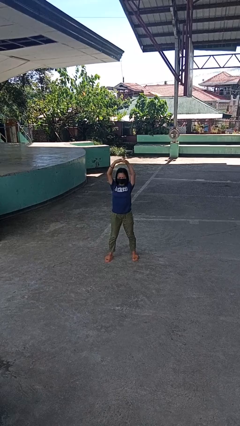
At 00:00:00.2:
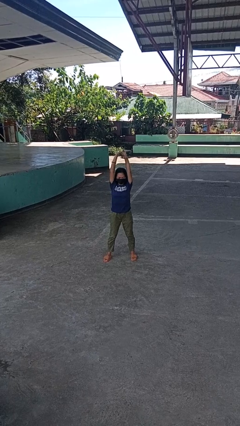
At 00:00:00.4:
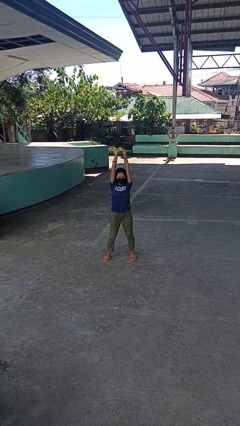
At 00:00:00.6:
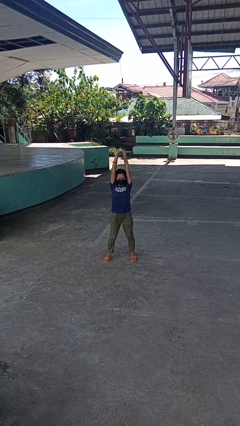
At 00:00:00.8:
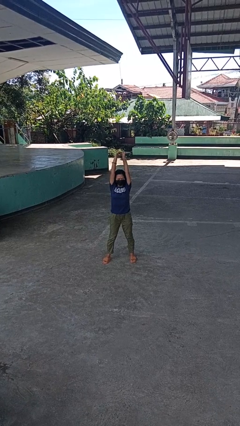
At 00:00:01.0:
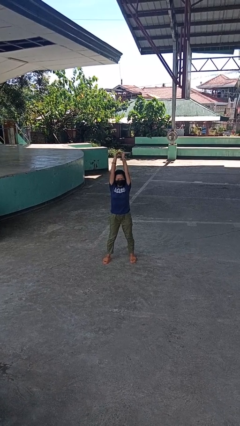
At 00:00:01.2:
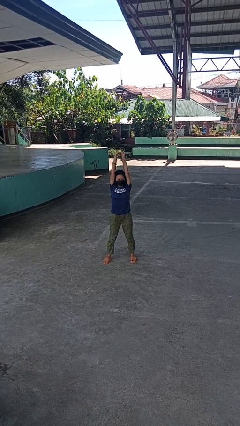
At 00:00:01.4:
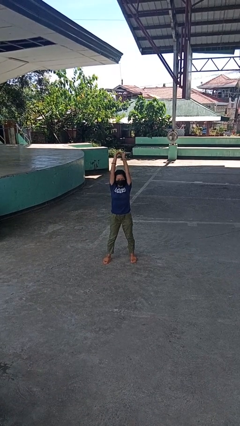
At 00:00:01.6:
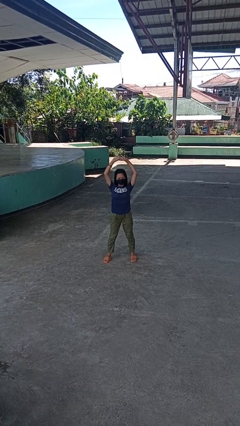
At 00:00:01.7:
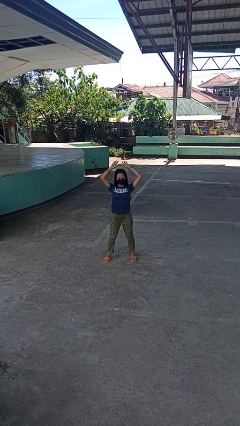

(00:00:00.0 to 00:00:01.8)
person stretches arms over head

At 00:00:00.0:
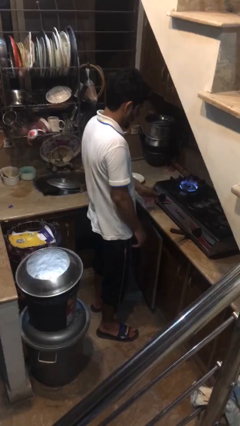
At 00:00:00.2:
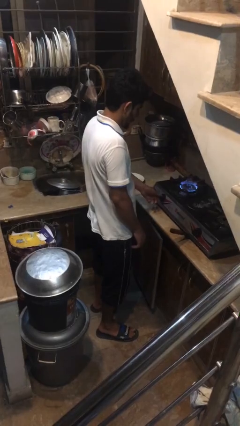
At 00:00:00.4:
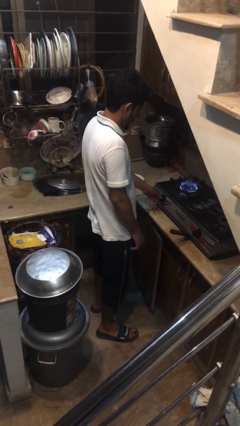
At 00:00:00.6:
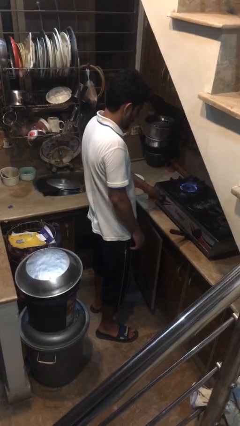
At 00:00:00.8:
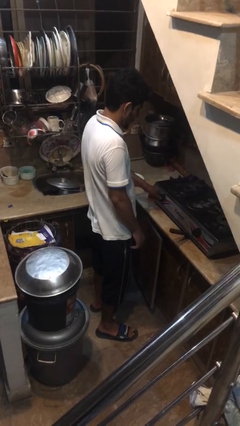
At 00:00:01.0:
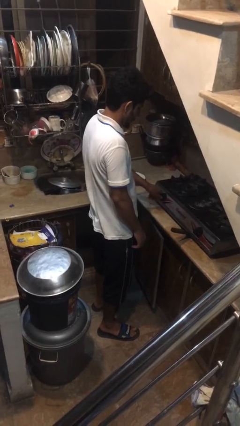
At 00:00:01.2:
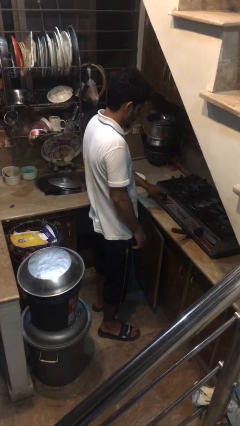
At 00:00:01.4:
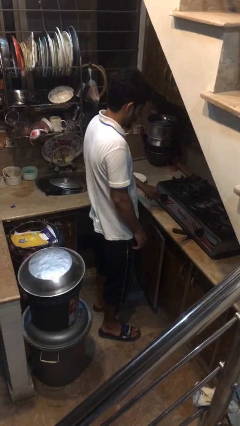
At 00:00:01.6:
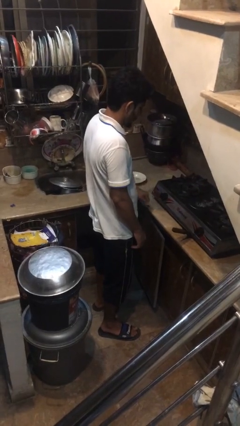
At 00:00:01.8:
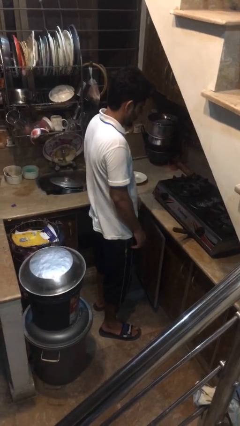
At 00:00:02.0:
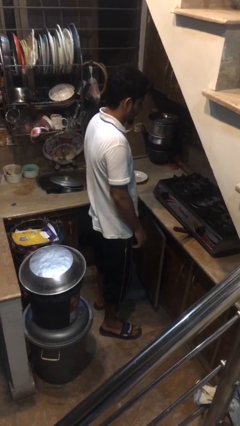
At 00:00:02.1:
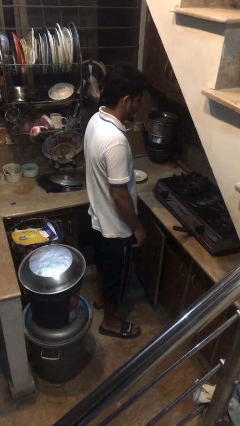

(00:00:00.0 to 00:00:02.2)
person turns off stovetop

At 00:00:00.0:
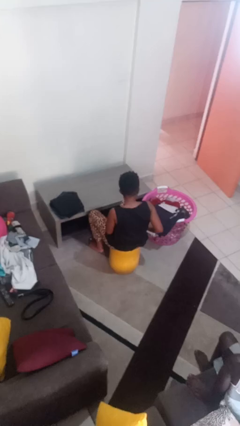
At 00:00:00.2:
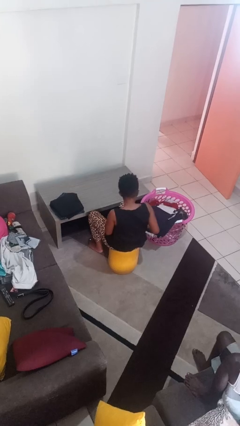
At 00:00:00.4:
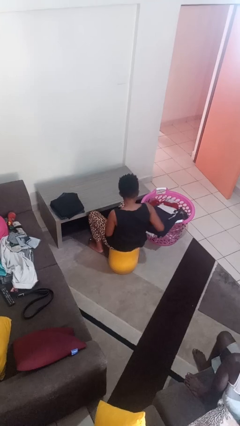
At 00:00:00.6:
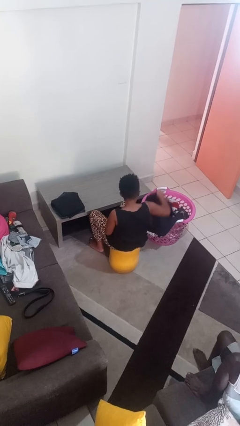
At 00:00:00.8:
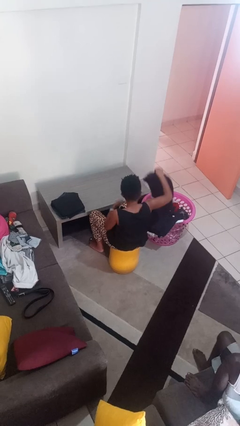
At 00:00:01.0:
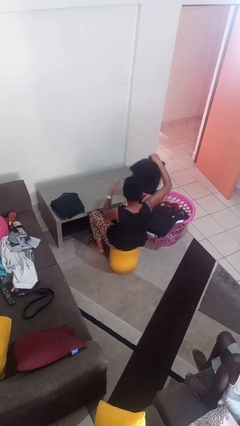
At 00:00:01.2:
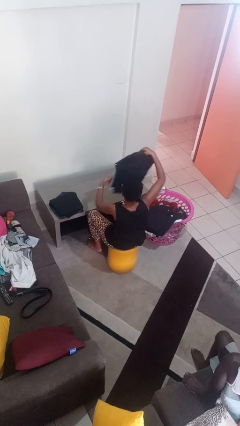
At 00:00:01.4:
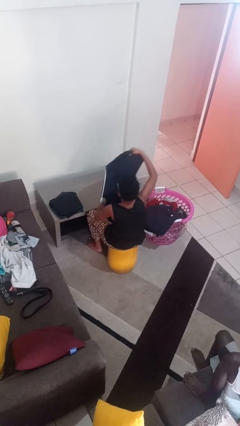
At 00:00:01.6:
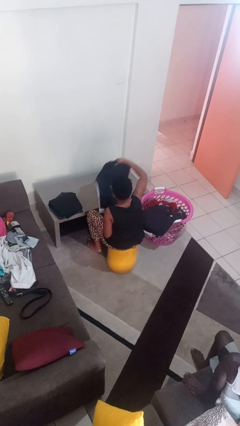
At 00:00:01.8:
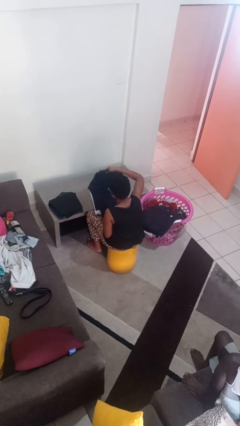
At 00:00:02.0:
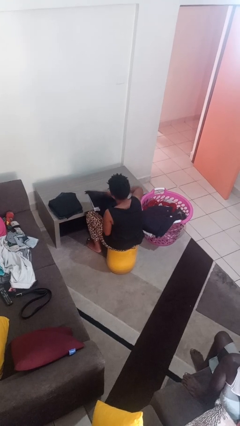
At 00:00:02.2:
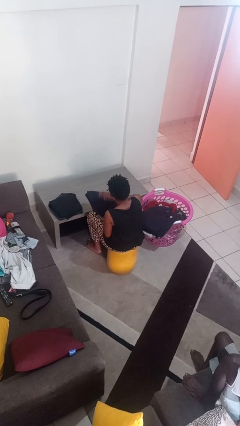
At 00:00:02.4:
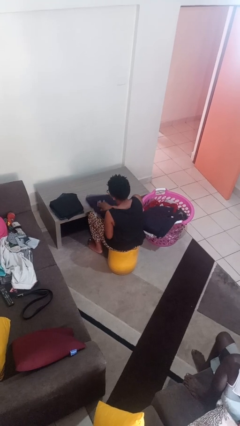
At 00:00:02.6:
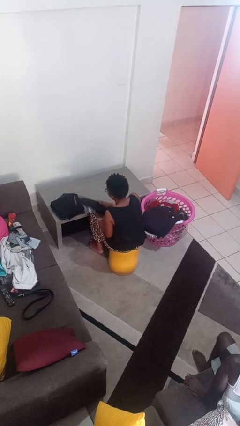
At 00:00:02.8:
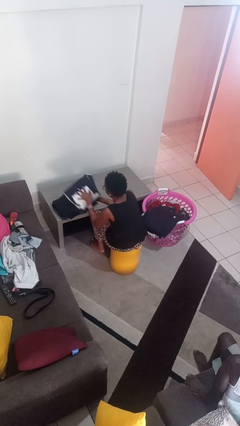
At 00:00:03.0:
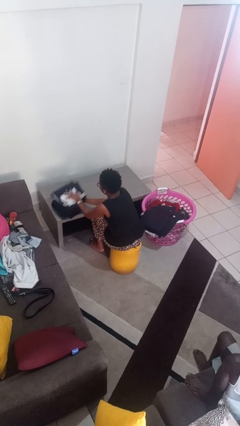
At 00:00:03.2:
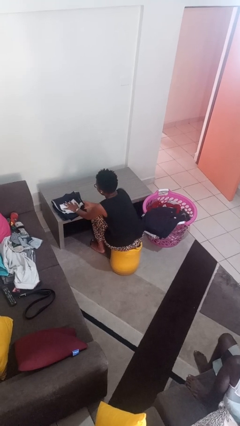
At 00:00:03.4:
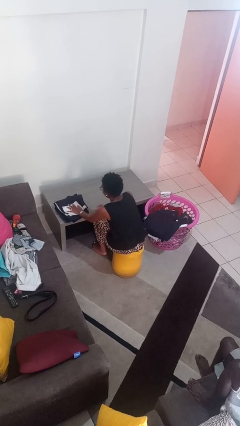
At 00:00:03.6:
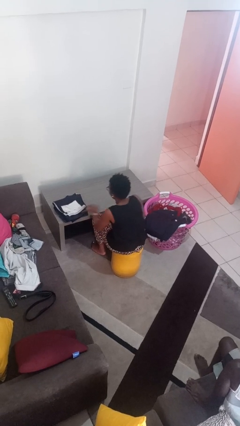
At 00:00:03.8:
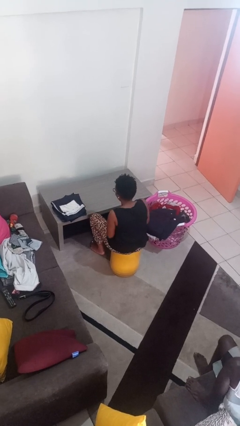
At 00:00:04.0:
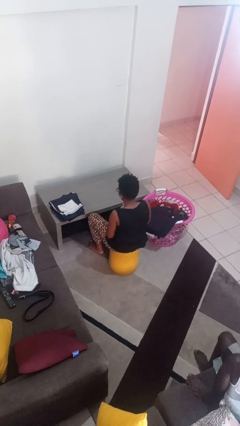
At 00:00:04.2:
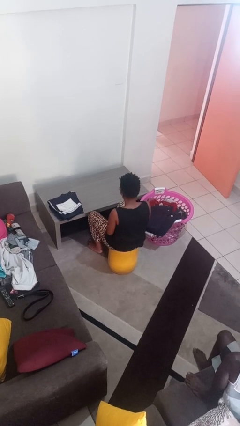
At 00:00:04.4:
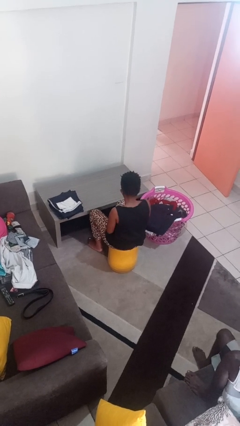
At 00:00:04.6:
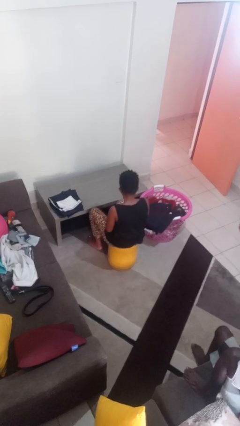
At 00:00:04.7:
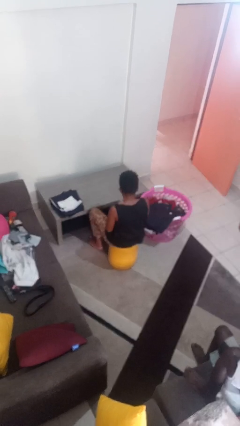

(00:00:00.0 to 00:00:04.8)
person folds pants

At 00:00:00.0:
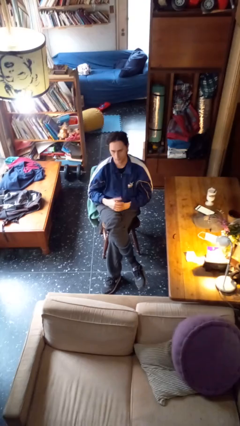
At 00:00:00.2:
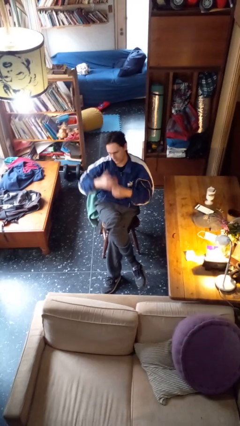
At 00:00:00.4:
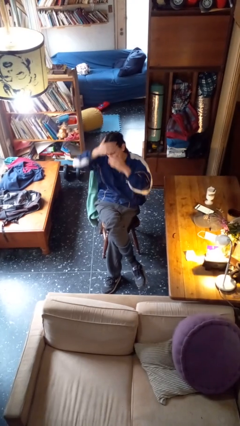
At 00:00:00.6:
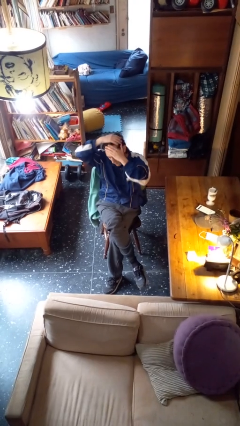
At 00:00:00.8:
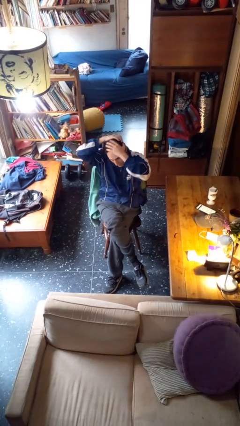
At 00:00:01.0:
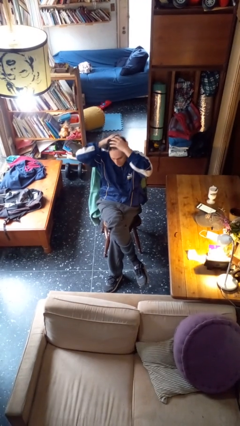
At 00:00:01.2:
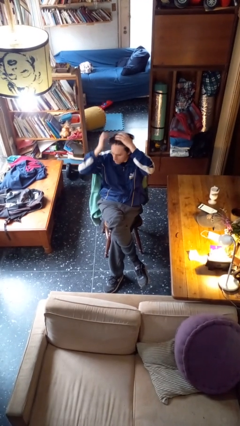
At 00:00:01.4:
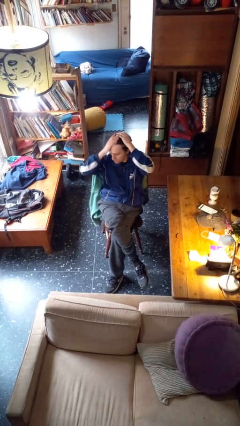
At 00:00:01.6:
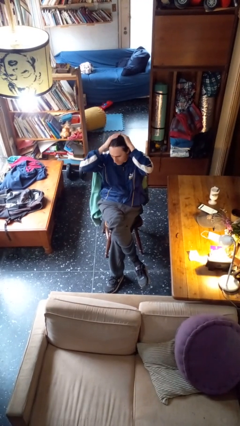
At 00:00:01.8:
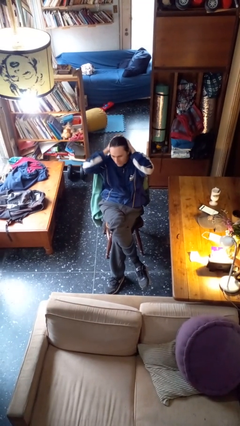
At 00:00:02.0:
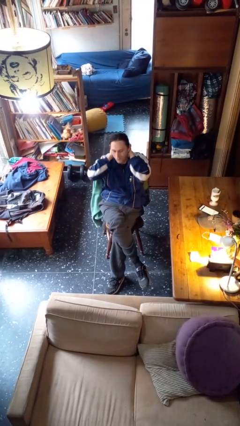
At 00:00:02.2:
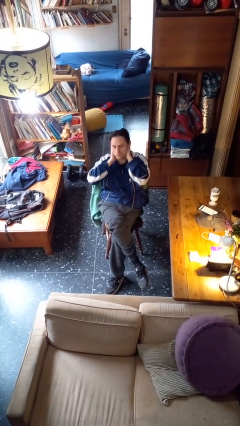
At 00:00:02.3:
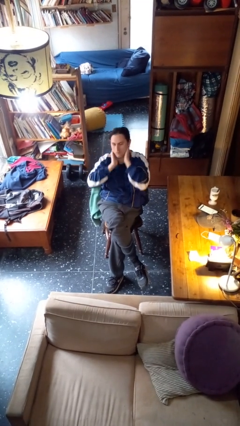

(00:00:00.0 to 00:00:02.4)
person strokes hair

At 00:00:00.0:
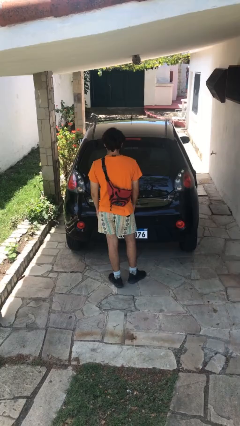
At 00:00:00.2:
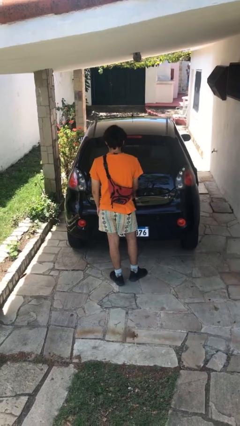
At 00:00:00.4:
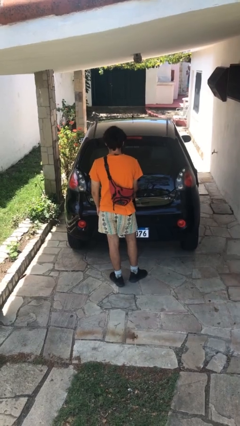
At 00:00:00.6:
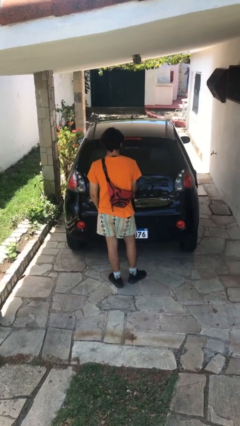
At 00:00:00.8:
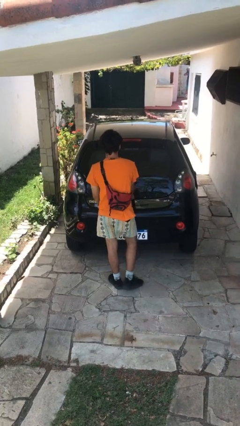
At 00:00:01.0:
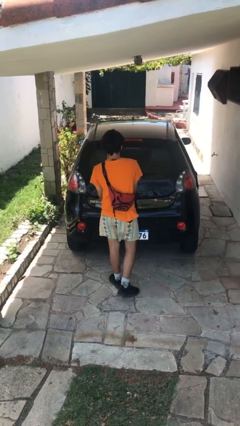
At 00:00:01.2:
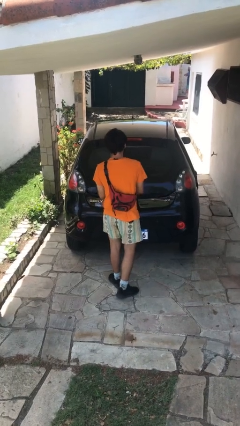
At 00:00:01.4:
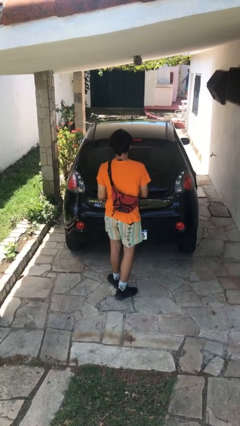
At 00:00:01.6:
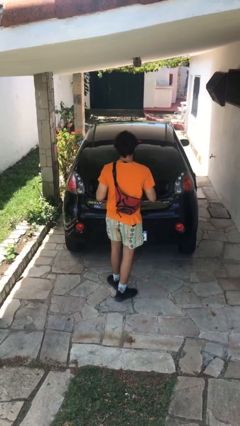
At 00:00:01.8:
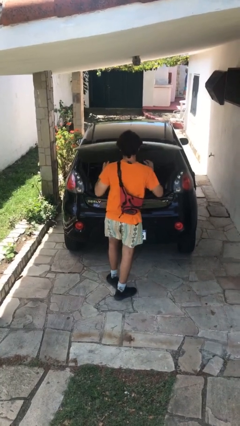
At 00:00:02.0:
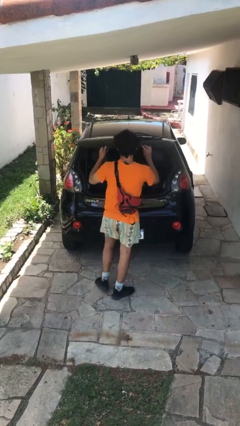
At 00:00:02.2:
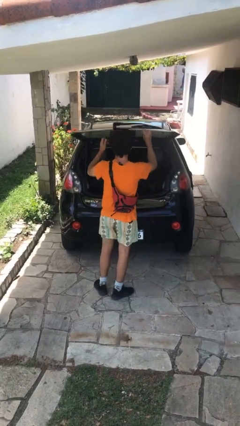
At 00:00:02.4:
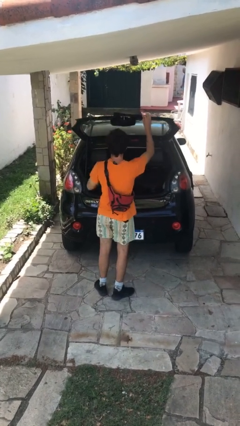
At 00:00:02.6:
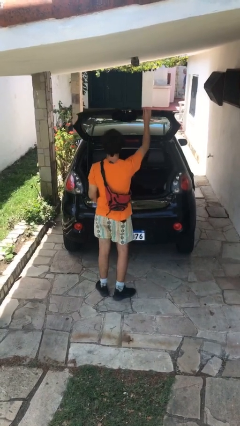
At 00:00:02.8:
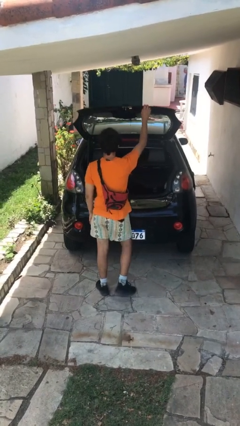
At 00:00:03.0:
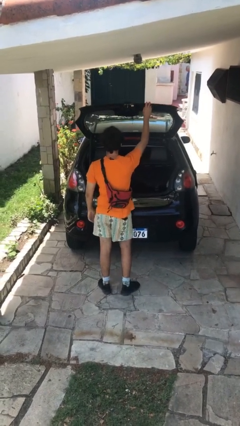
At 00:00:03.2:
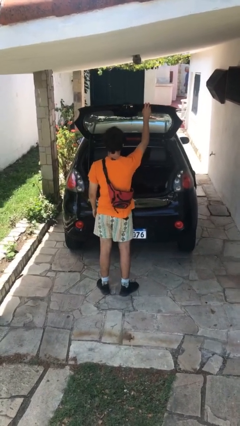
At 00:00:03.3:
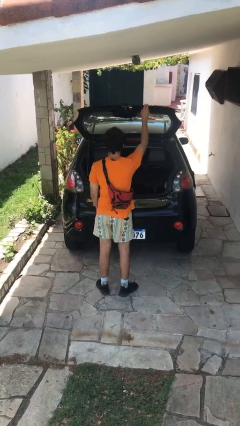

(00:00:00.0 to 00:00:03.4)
person opens car trunk

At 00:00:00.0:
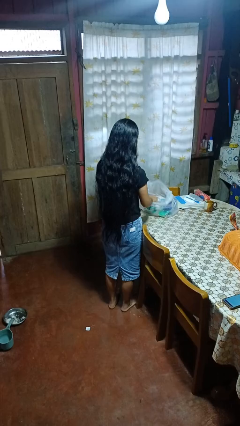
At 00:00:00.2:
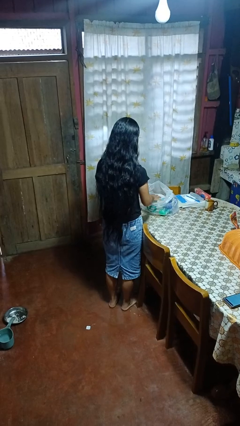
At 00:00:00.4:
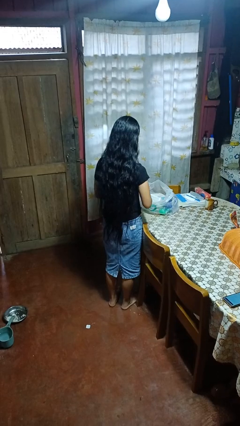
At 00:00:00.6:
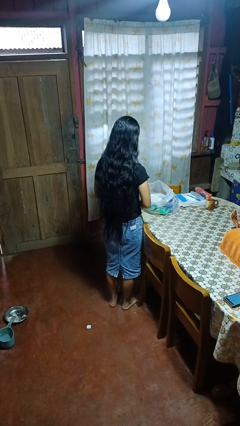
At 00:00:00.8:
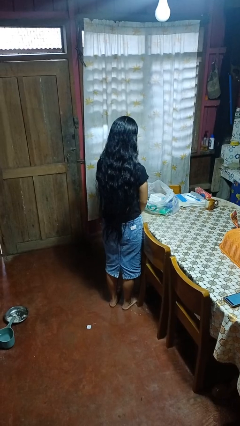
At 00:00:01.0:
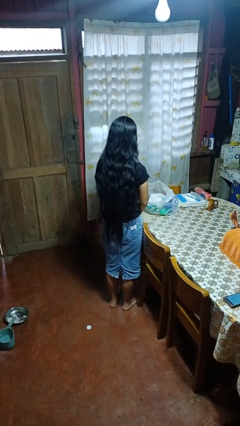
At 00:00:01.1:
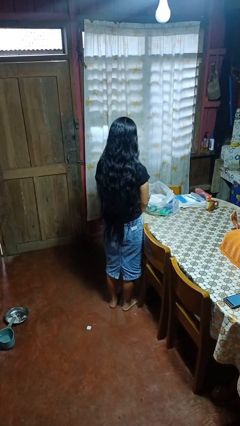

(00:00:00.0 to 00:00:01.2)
person puts object into bag

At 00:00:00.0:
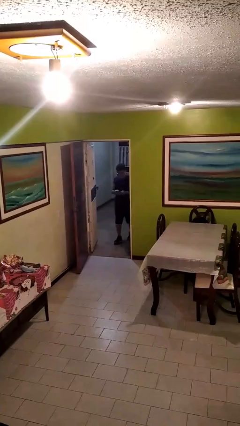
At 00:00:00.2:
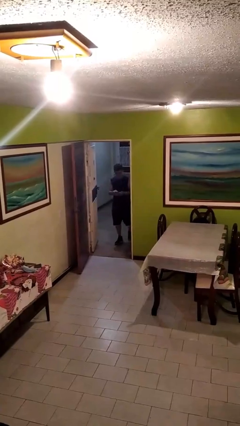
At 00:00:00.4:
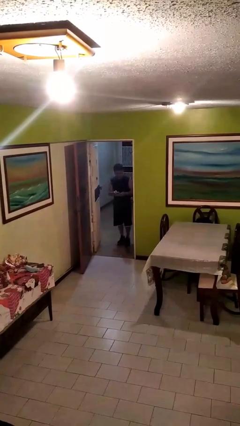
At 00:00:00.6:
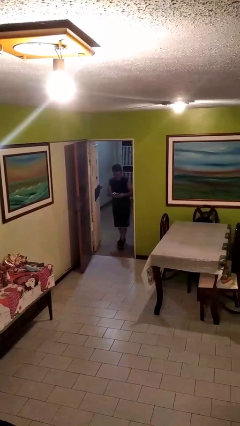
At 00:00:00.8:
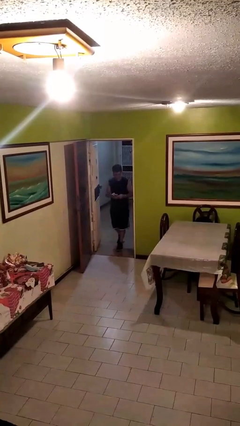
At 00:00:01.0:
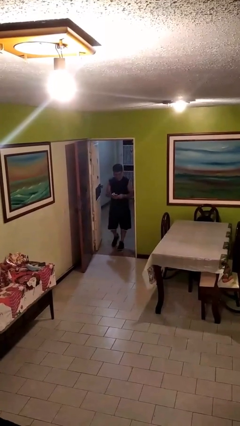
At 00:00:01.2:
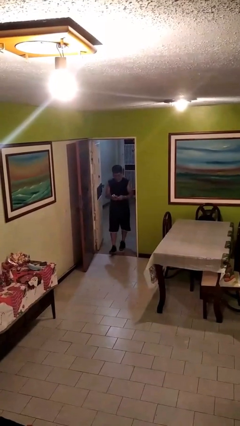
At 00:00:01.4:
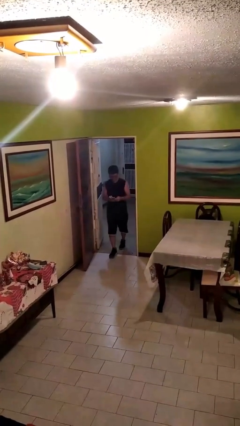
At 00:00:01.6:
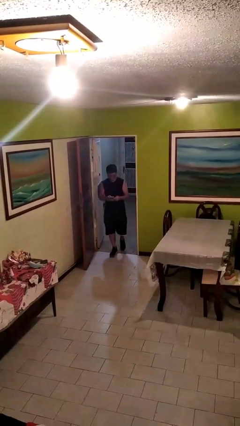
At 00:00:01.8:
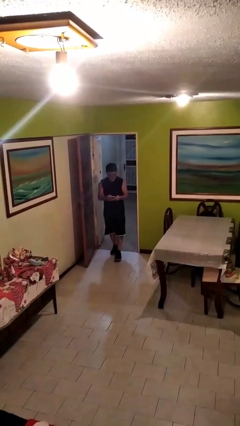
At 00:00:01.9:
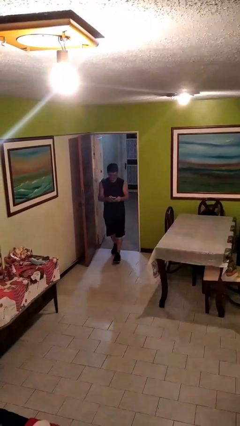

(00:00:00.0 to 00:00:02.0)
person enters scene through structure
